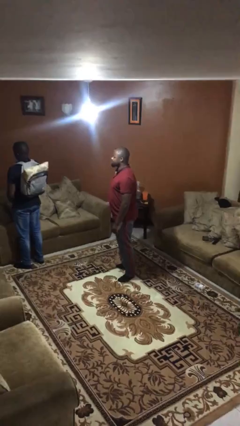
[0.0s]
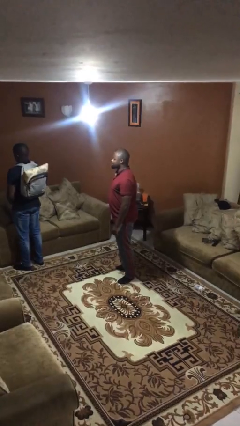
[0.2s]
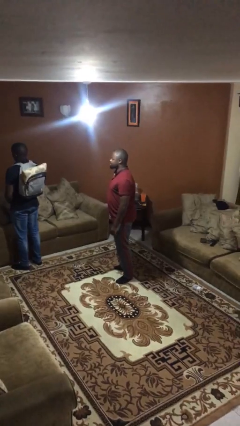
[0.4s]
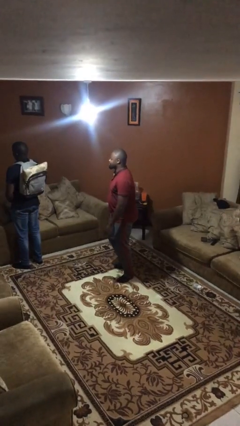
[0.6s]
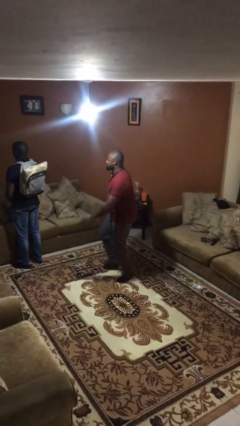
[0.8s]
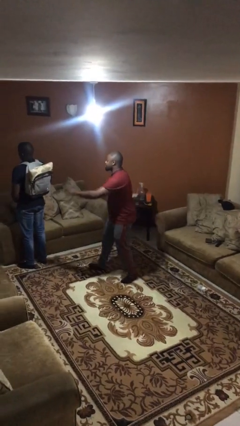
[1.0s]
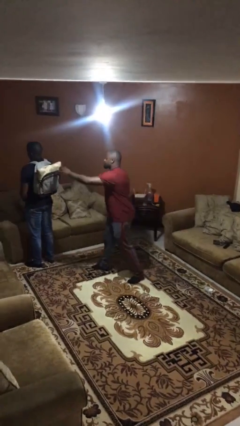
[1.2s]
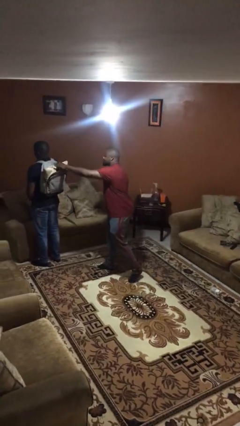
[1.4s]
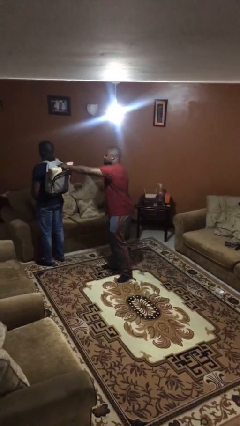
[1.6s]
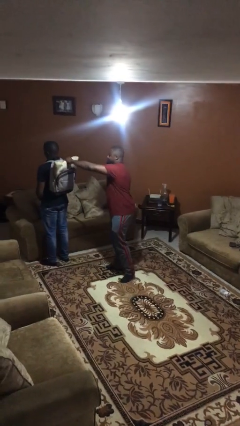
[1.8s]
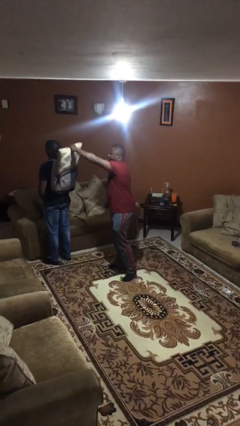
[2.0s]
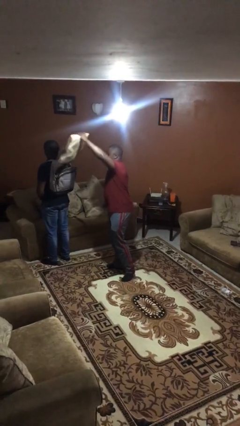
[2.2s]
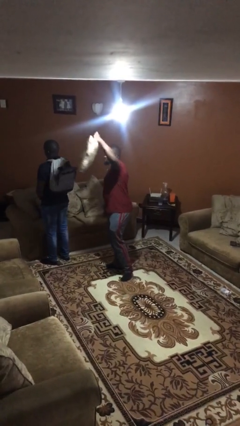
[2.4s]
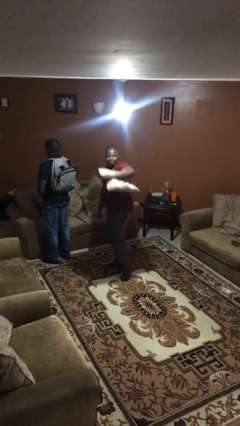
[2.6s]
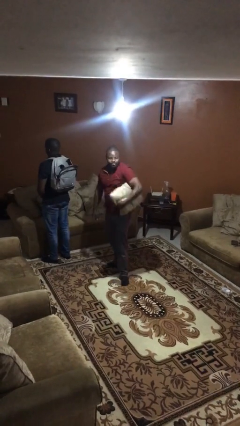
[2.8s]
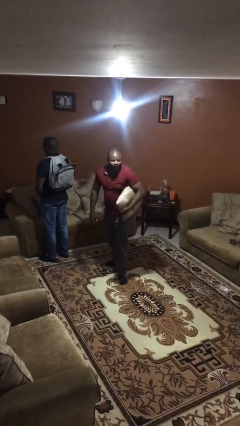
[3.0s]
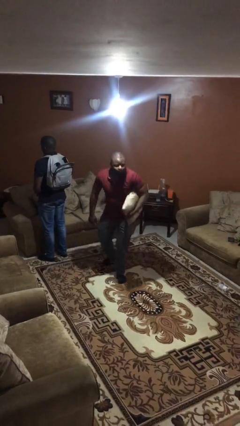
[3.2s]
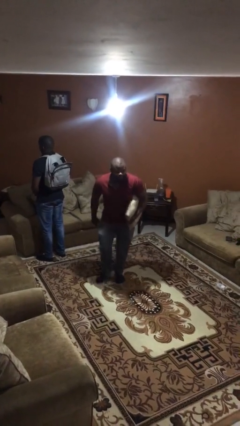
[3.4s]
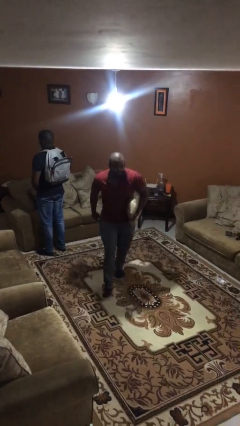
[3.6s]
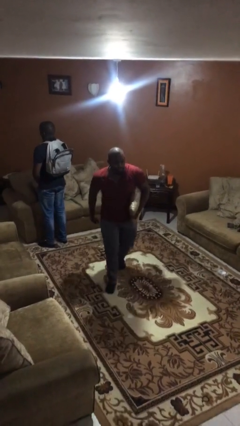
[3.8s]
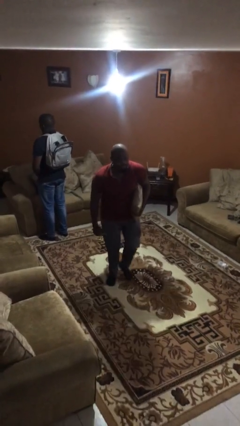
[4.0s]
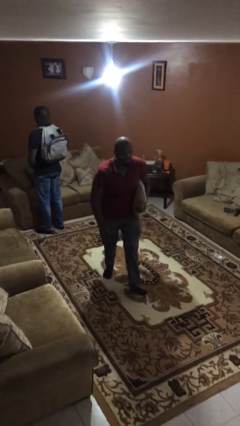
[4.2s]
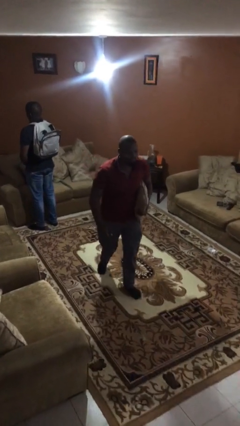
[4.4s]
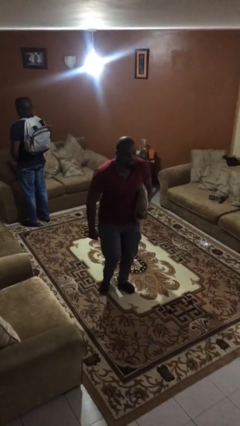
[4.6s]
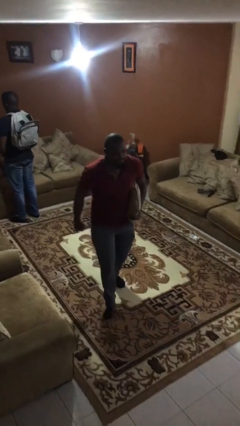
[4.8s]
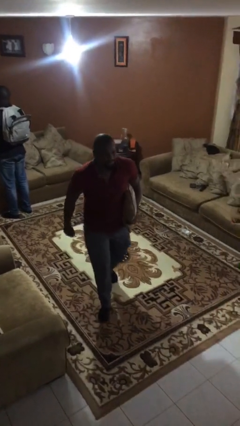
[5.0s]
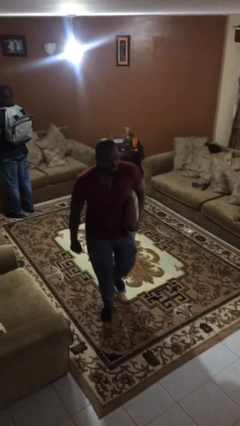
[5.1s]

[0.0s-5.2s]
person steals object from person

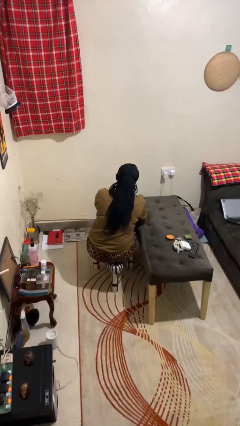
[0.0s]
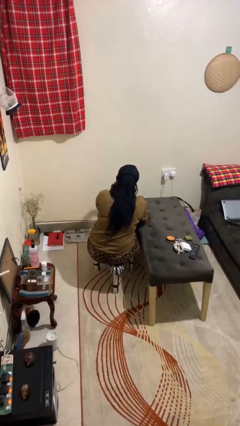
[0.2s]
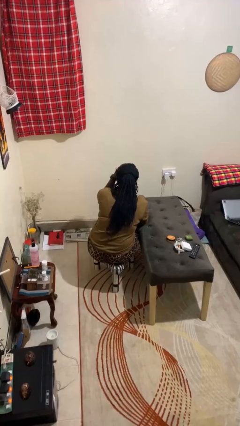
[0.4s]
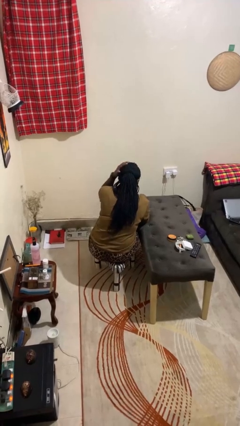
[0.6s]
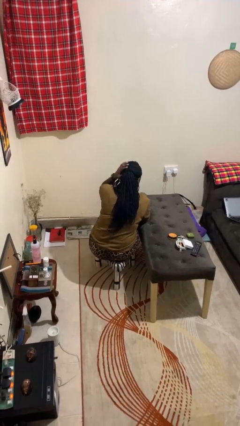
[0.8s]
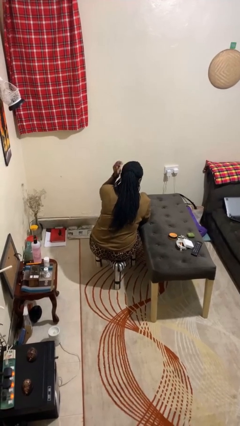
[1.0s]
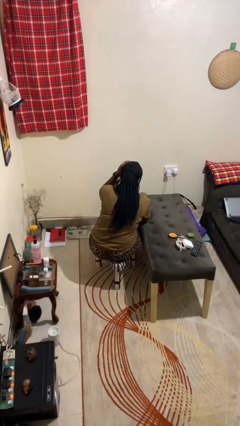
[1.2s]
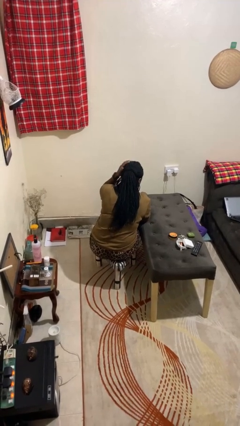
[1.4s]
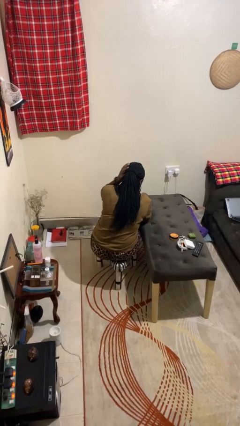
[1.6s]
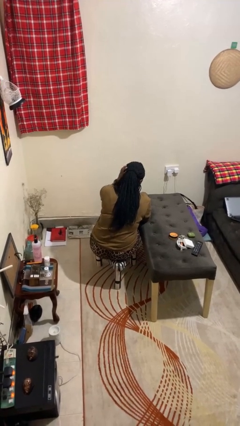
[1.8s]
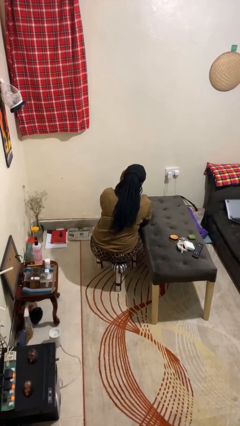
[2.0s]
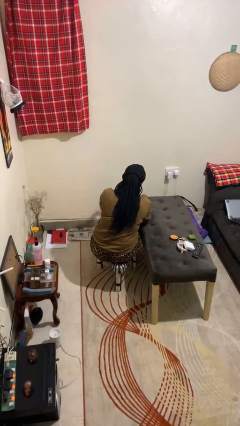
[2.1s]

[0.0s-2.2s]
person strokes hair

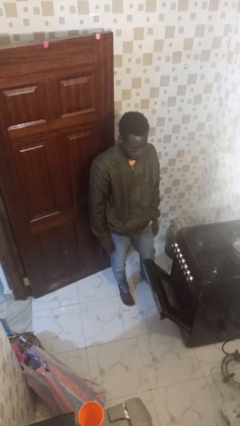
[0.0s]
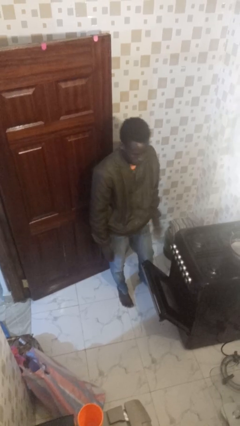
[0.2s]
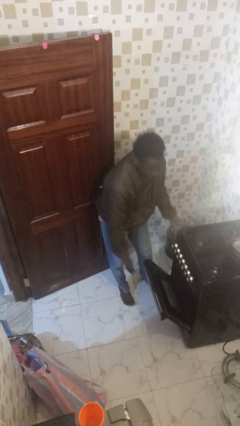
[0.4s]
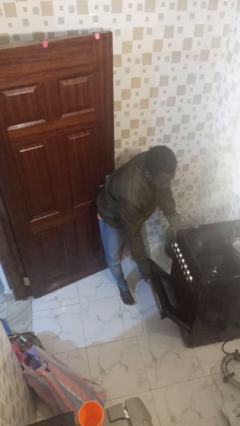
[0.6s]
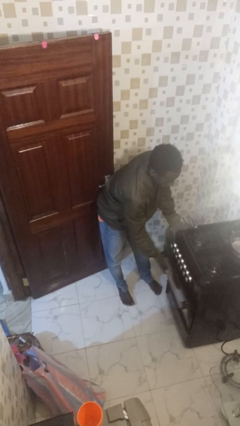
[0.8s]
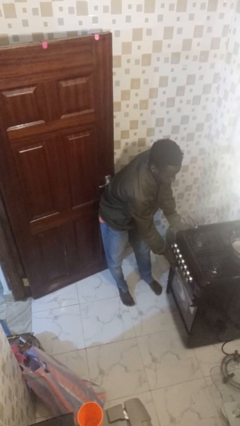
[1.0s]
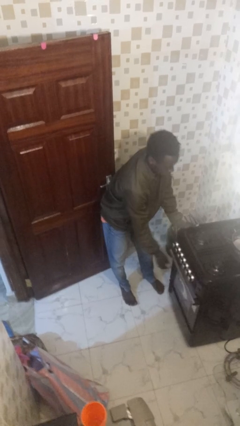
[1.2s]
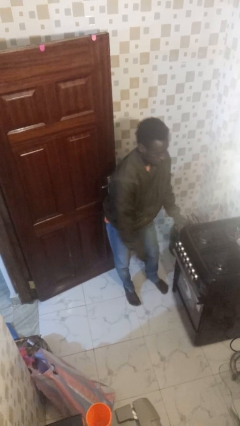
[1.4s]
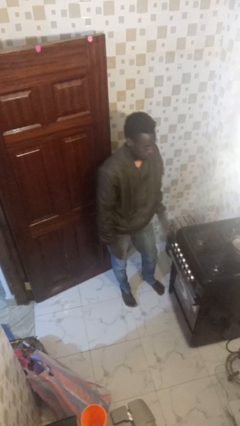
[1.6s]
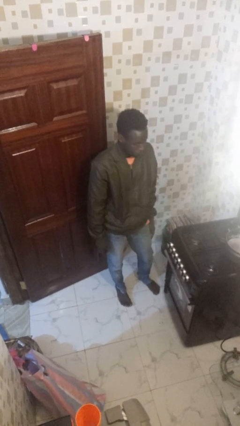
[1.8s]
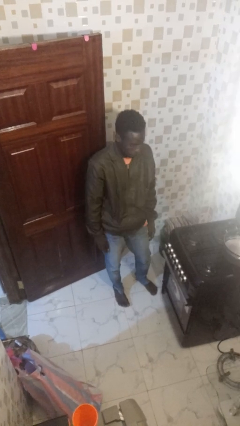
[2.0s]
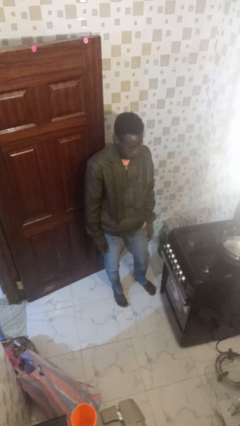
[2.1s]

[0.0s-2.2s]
person closes oven door

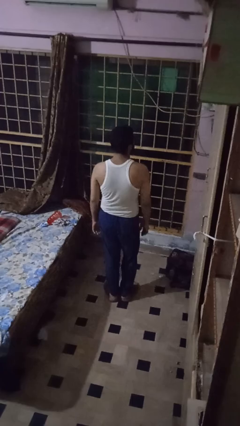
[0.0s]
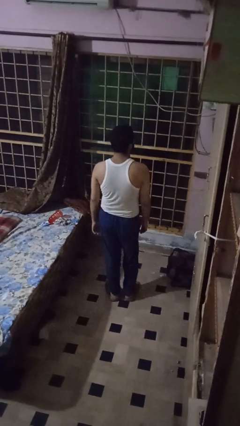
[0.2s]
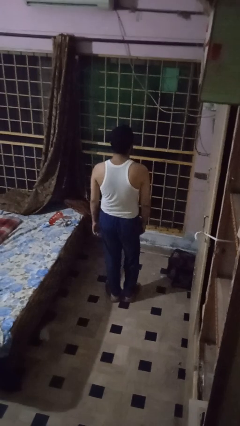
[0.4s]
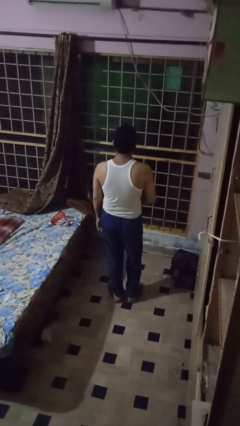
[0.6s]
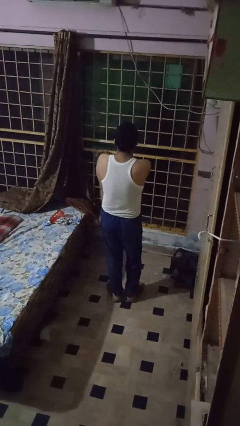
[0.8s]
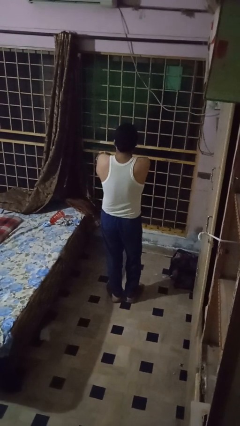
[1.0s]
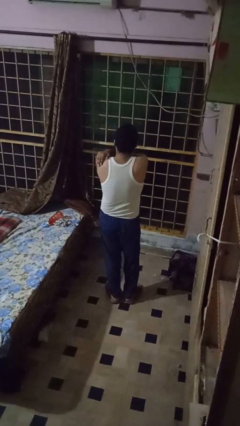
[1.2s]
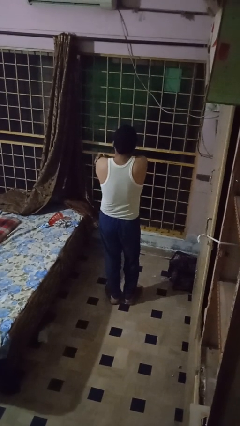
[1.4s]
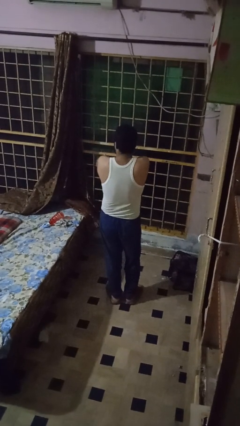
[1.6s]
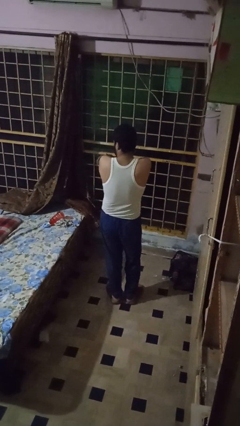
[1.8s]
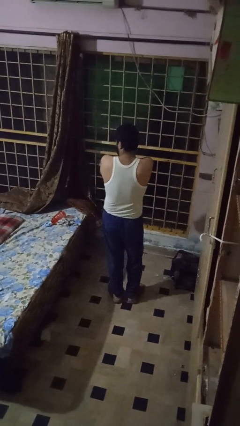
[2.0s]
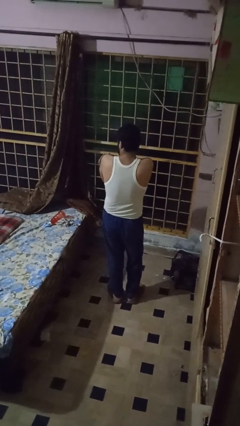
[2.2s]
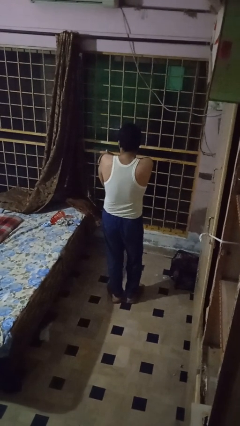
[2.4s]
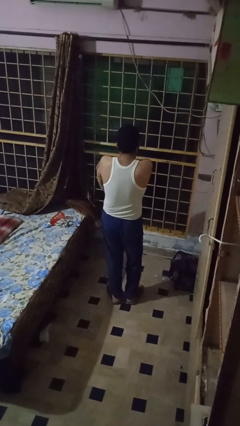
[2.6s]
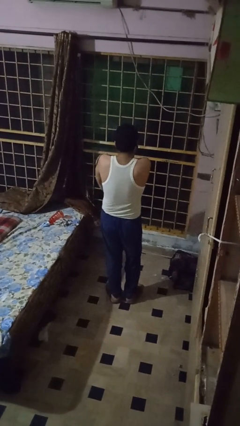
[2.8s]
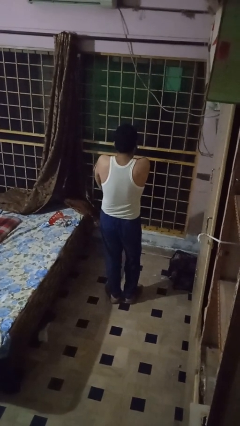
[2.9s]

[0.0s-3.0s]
person swats bug

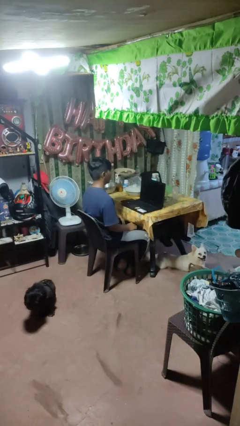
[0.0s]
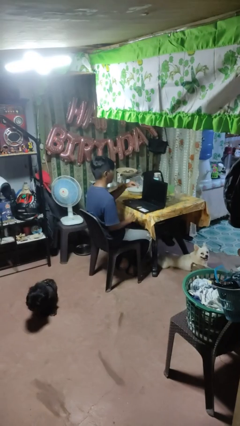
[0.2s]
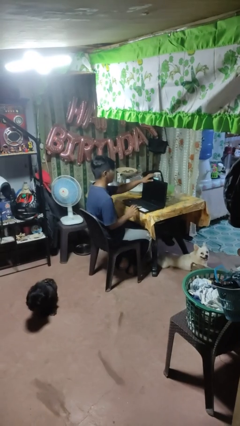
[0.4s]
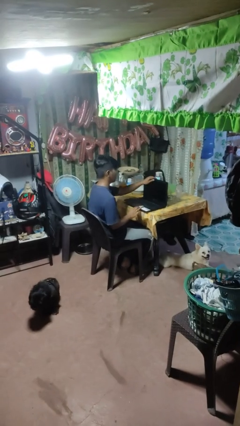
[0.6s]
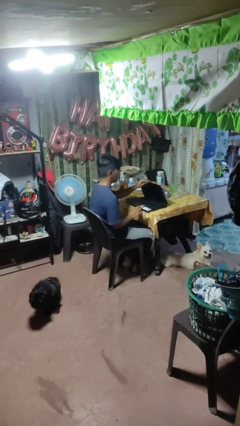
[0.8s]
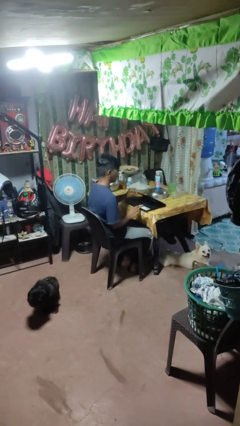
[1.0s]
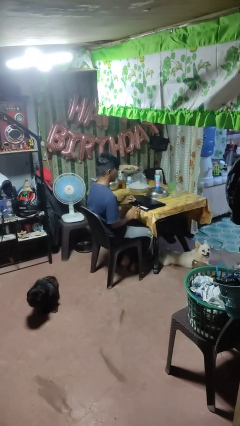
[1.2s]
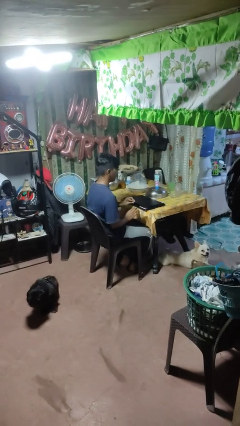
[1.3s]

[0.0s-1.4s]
person closes laptop

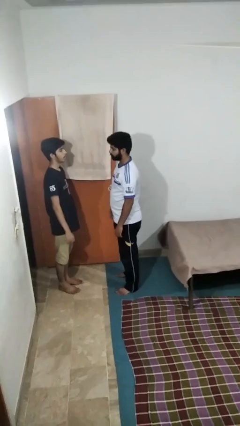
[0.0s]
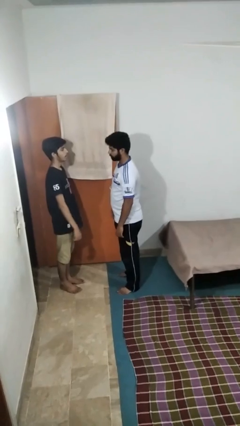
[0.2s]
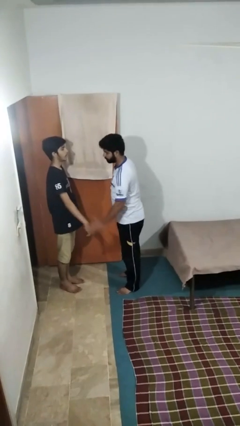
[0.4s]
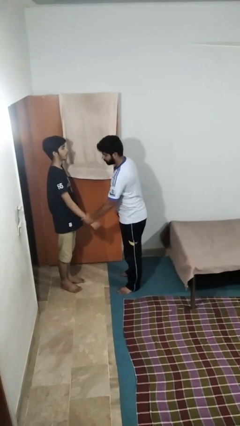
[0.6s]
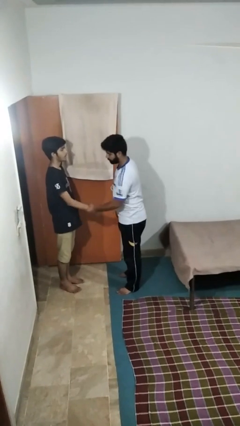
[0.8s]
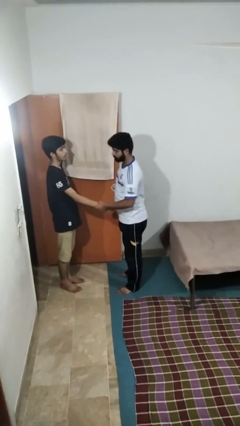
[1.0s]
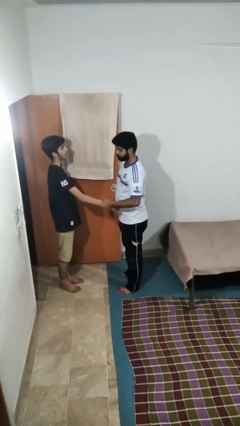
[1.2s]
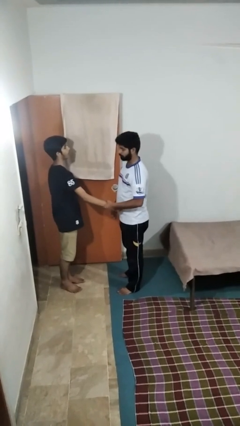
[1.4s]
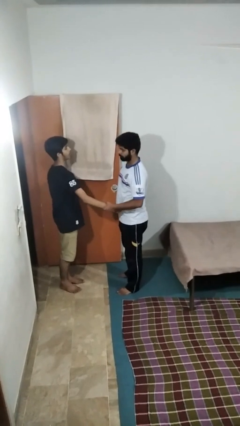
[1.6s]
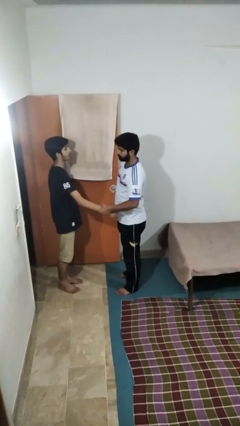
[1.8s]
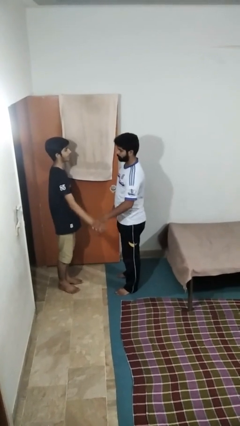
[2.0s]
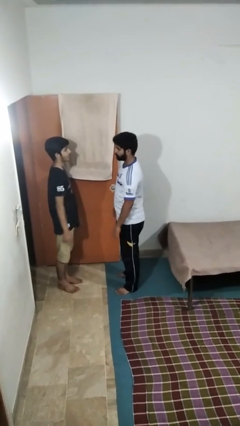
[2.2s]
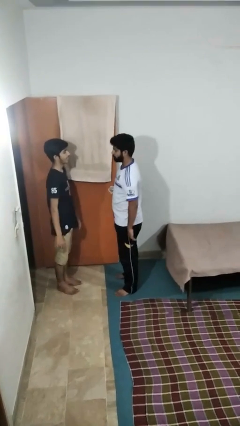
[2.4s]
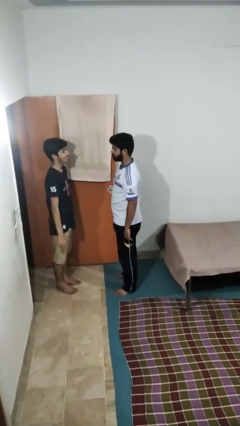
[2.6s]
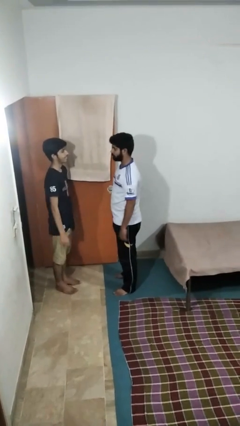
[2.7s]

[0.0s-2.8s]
person grabs person by forearm

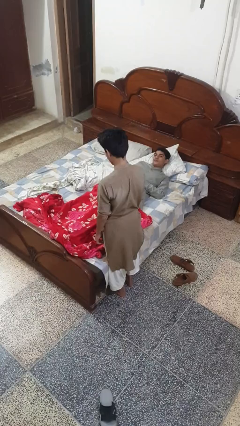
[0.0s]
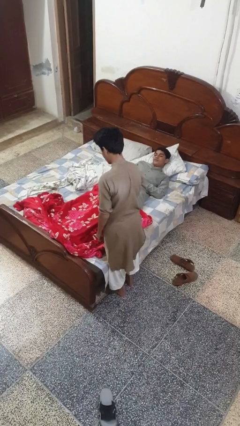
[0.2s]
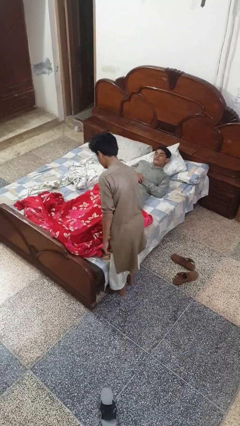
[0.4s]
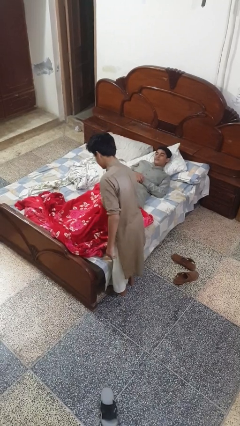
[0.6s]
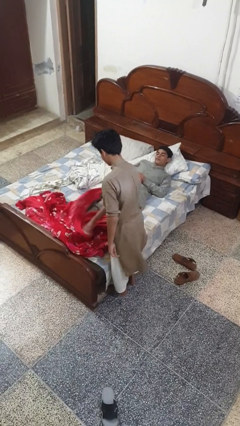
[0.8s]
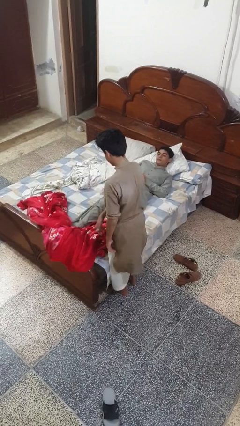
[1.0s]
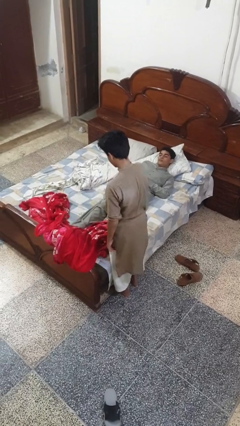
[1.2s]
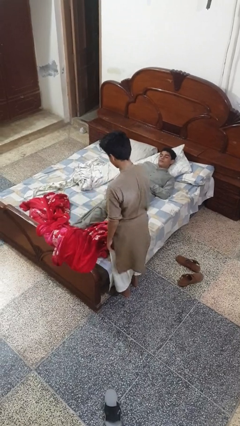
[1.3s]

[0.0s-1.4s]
person uncovers friend with blanket
